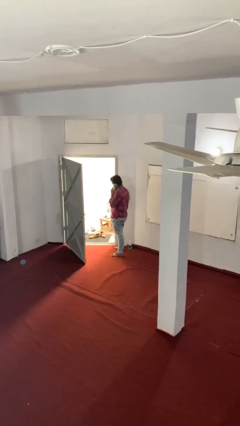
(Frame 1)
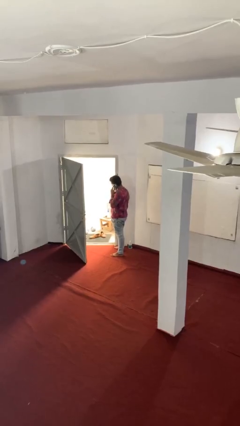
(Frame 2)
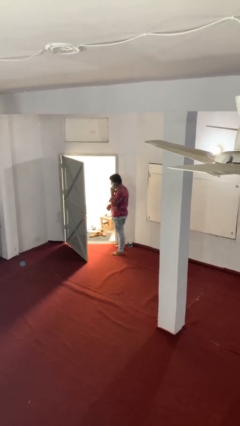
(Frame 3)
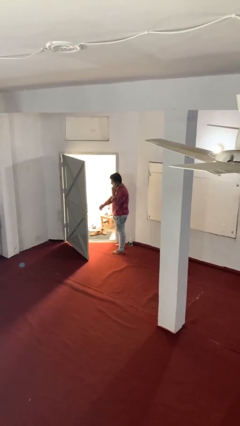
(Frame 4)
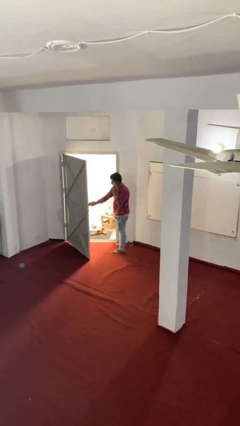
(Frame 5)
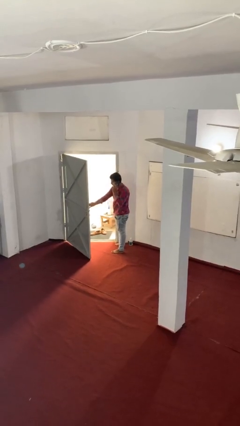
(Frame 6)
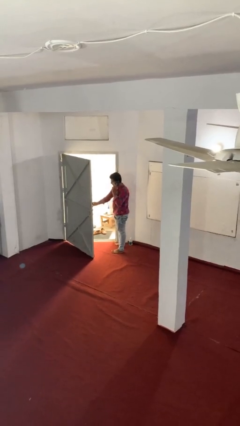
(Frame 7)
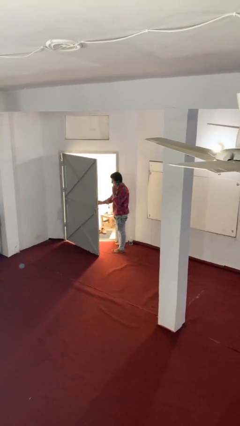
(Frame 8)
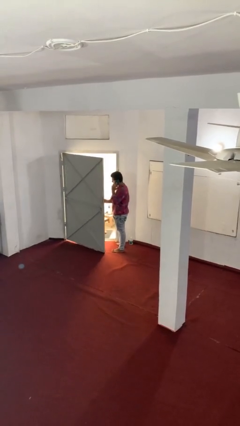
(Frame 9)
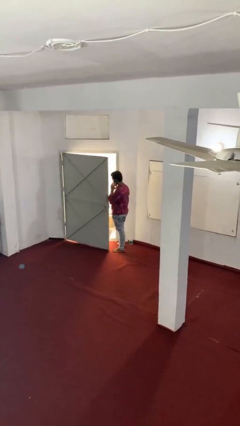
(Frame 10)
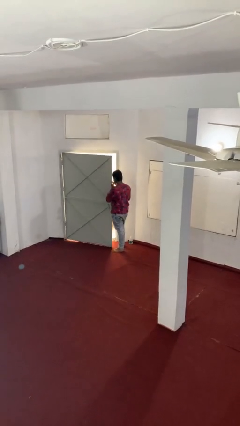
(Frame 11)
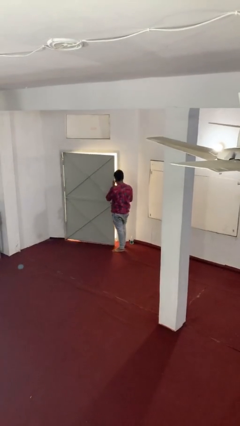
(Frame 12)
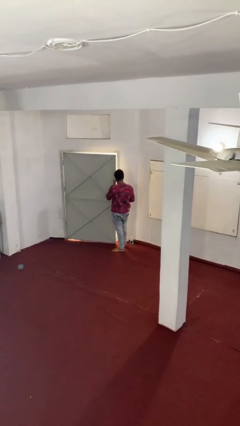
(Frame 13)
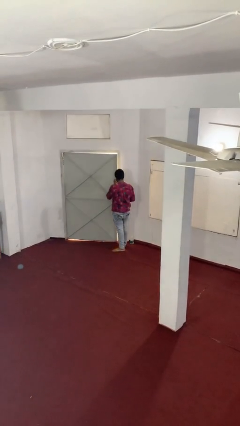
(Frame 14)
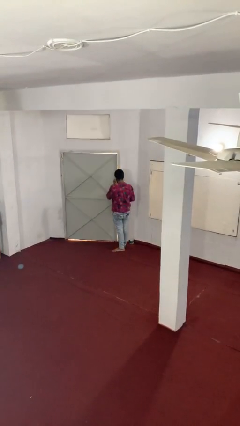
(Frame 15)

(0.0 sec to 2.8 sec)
person closes facility door

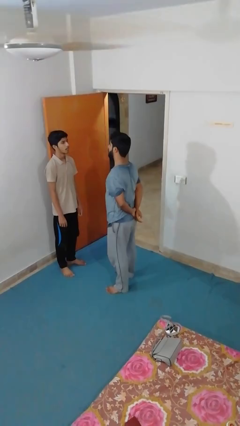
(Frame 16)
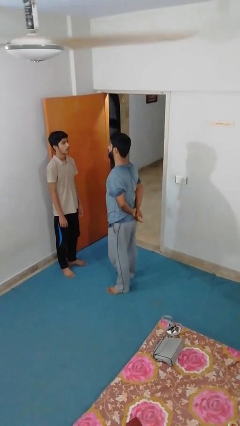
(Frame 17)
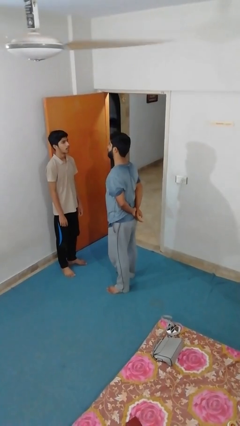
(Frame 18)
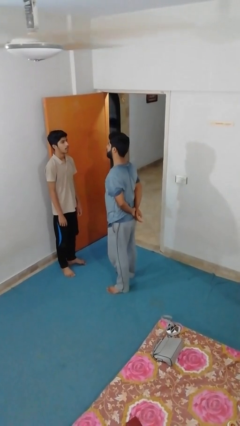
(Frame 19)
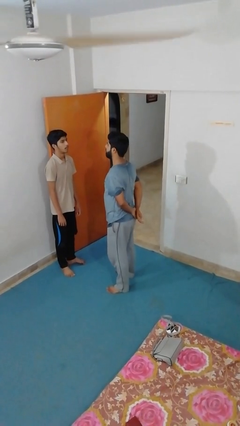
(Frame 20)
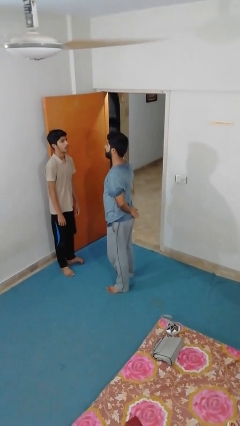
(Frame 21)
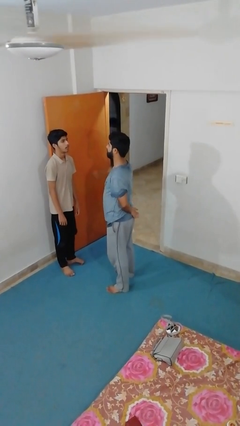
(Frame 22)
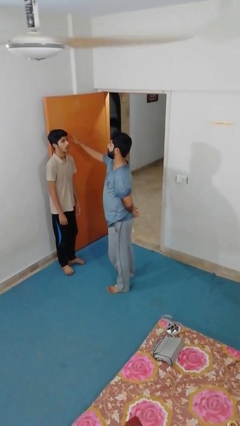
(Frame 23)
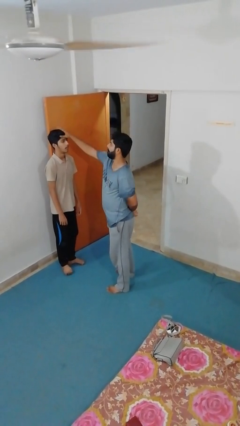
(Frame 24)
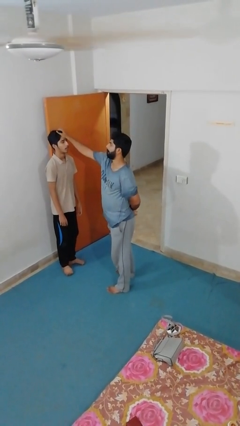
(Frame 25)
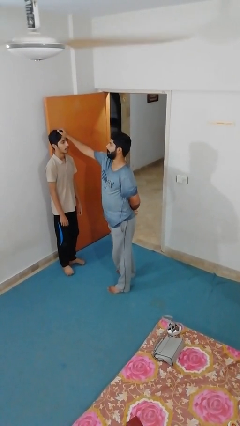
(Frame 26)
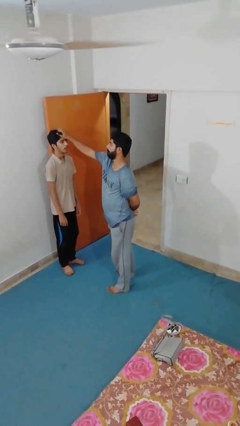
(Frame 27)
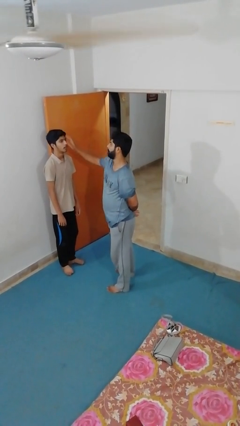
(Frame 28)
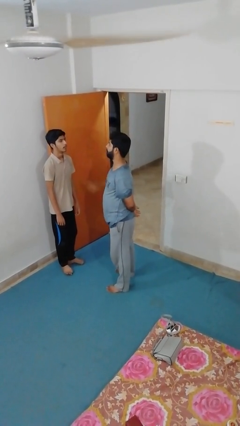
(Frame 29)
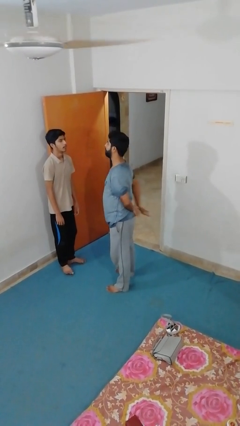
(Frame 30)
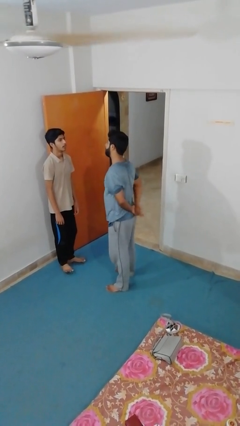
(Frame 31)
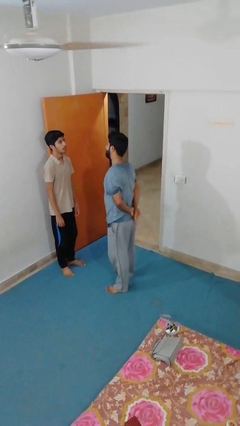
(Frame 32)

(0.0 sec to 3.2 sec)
person grabs person by hair

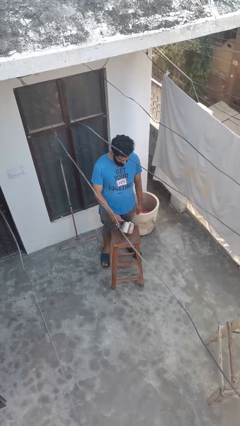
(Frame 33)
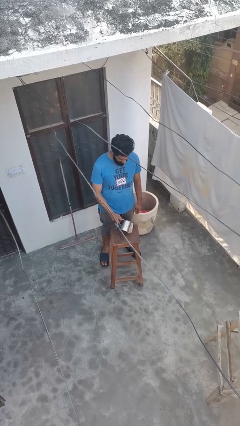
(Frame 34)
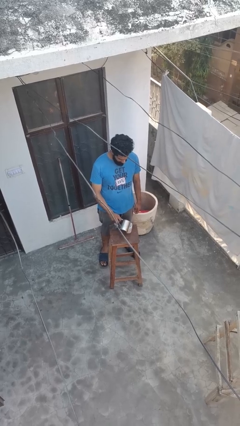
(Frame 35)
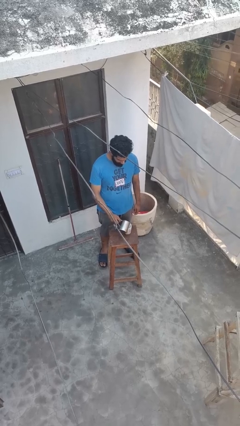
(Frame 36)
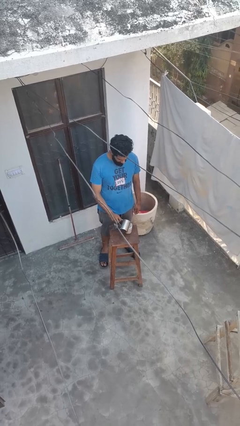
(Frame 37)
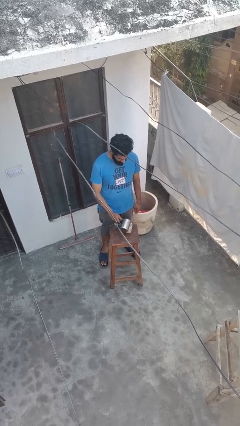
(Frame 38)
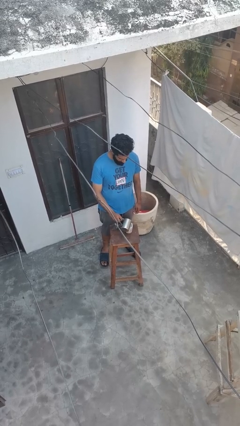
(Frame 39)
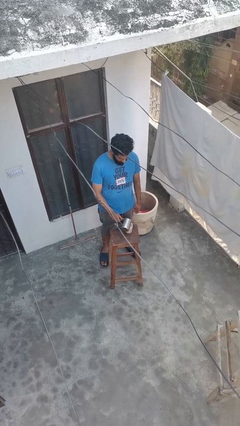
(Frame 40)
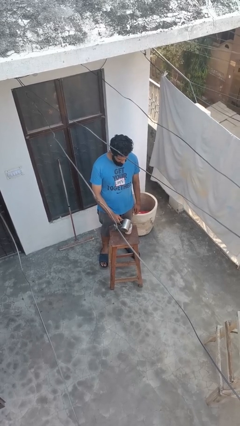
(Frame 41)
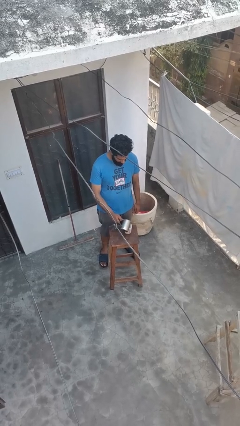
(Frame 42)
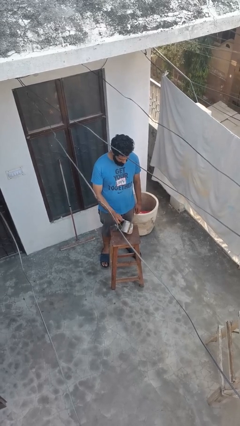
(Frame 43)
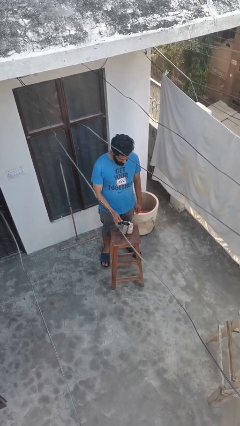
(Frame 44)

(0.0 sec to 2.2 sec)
person pours coffee into mug

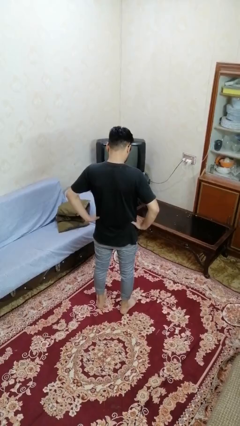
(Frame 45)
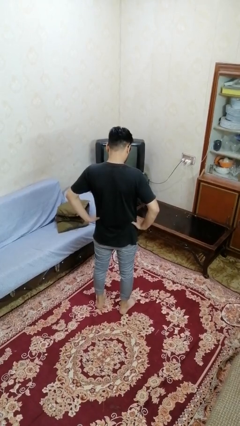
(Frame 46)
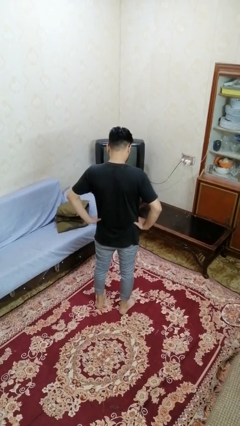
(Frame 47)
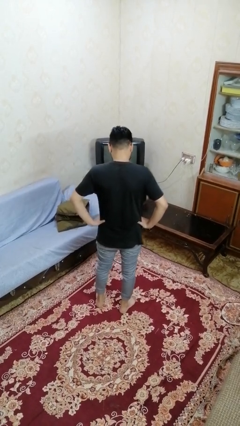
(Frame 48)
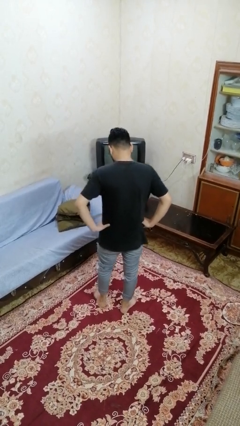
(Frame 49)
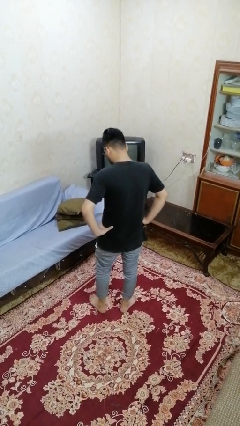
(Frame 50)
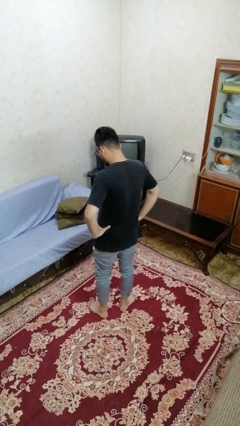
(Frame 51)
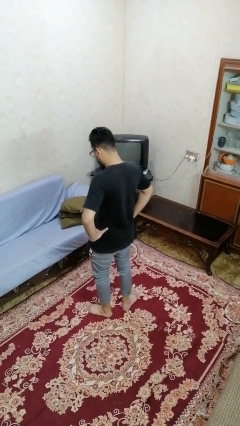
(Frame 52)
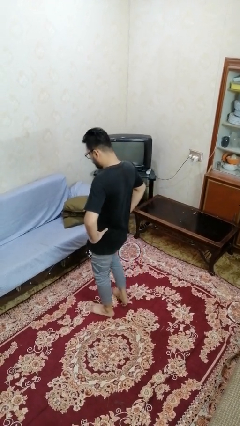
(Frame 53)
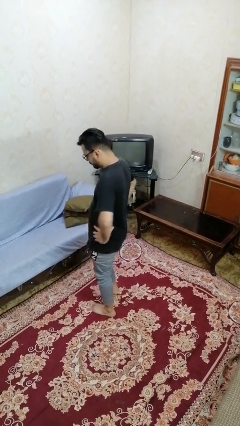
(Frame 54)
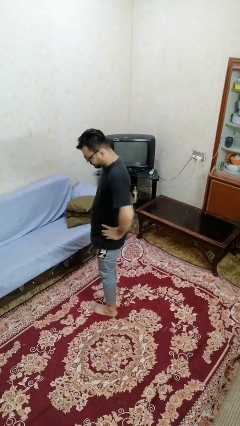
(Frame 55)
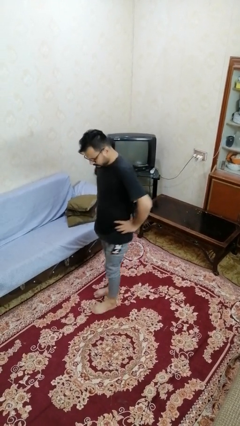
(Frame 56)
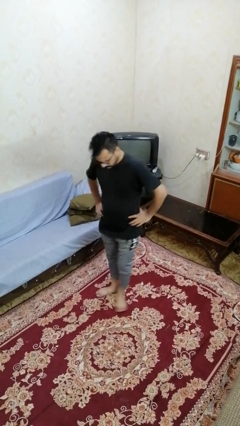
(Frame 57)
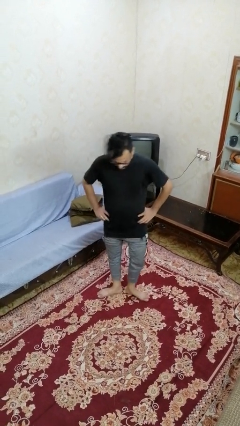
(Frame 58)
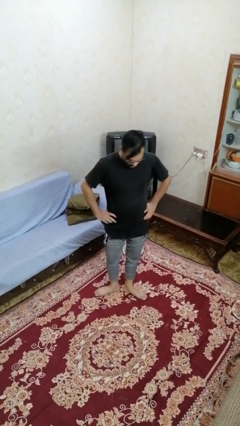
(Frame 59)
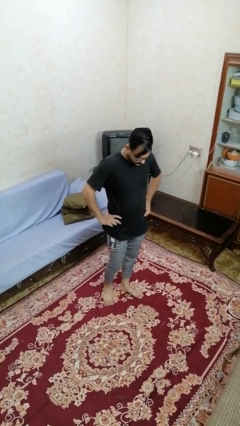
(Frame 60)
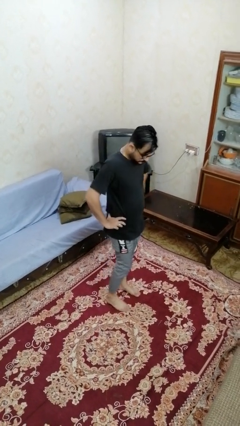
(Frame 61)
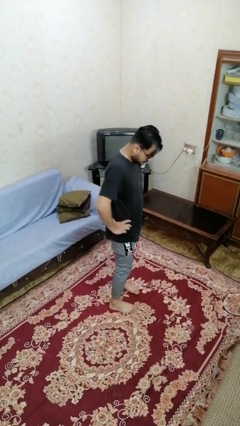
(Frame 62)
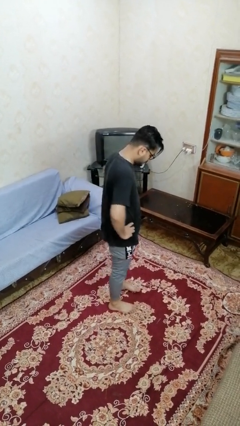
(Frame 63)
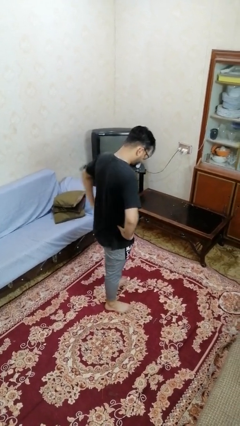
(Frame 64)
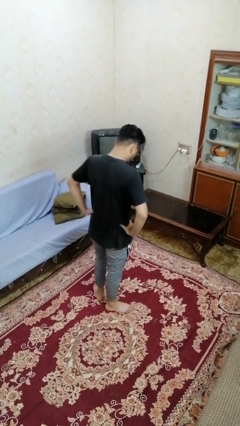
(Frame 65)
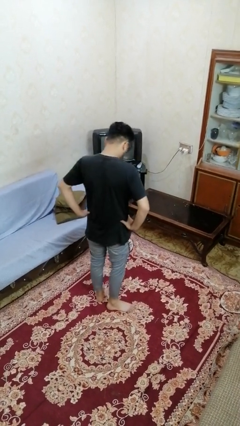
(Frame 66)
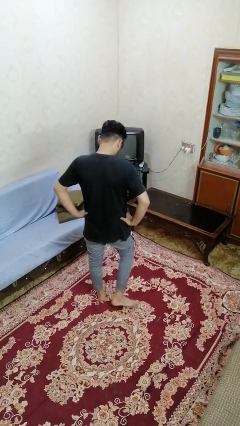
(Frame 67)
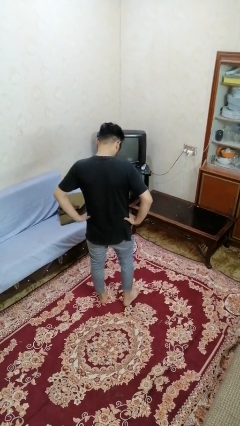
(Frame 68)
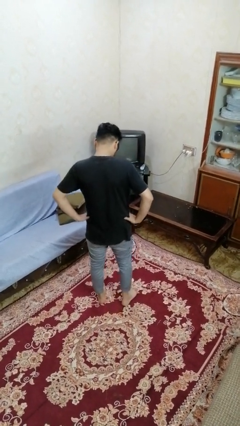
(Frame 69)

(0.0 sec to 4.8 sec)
person twirls

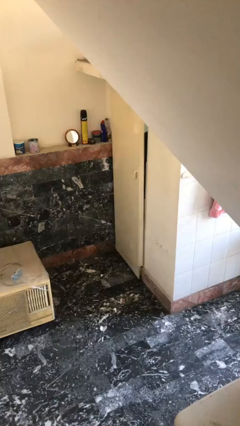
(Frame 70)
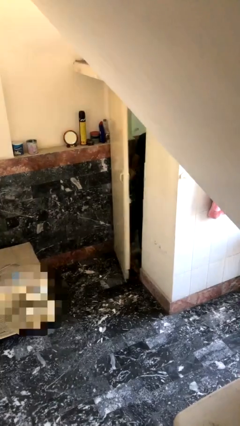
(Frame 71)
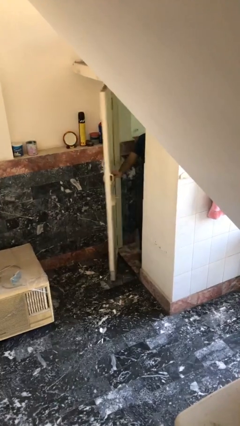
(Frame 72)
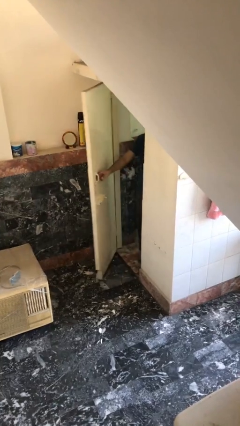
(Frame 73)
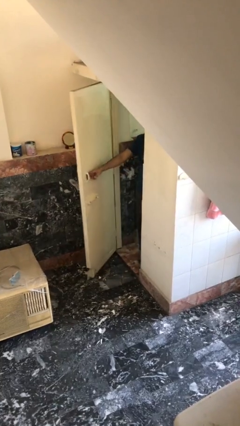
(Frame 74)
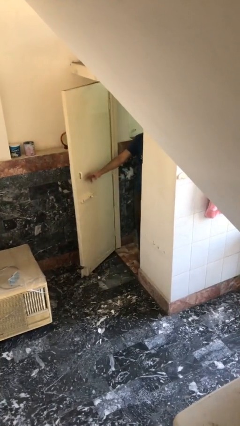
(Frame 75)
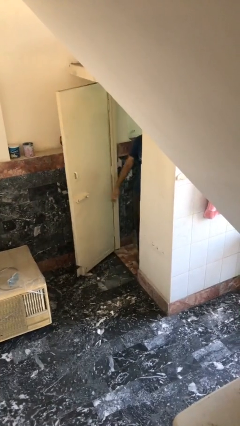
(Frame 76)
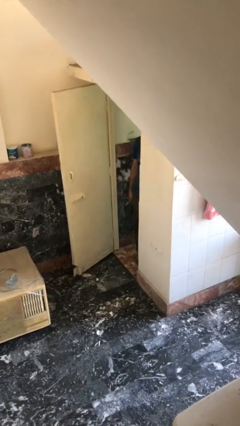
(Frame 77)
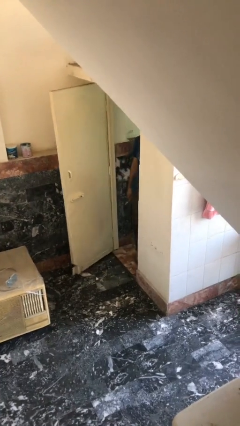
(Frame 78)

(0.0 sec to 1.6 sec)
person opens facility door

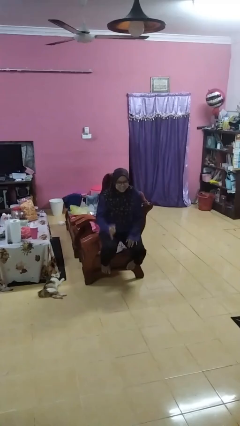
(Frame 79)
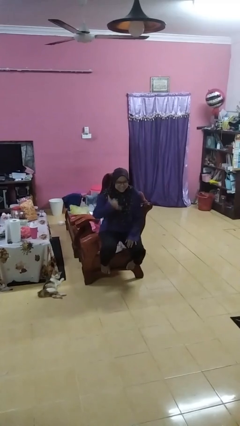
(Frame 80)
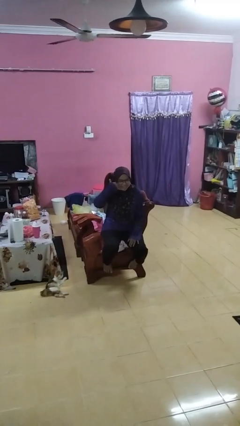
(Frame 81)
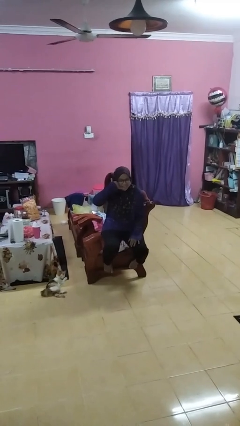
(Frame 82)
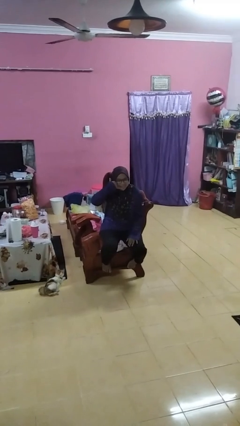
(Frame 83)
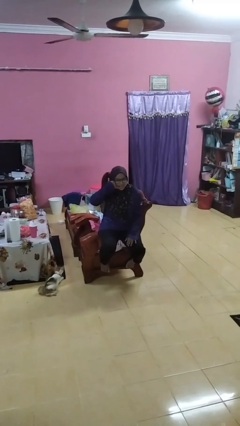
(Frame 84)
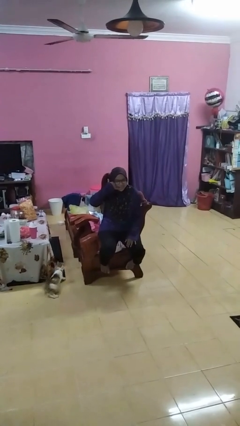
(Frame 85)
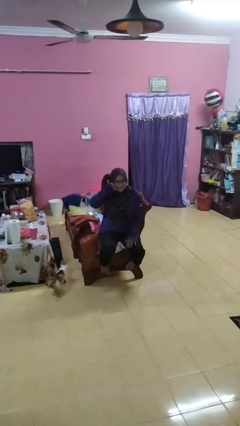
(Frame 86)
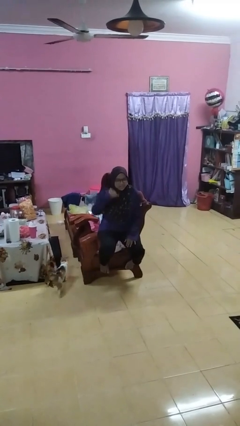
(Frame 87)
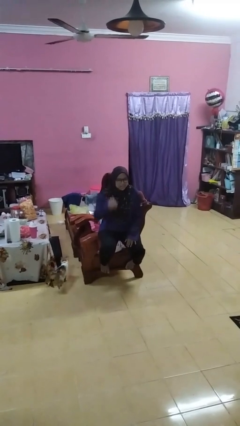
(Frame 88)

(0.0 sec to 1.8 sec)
person gestures call me

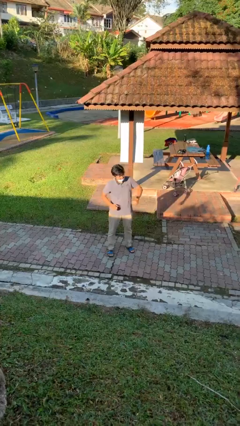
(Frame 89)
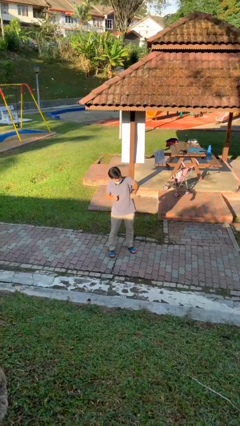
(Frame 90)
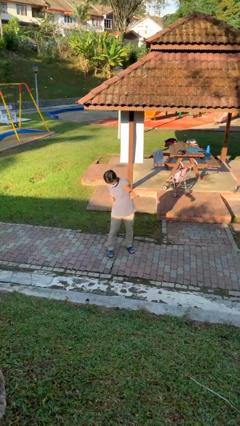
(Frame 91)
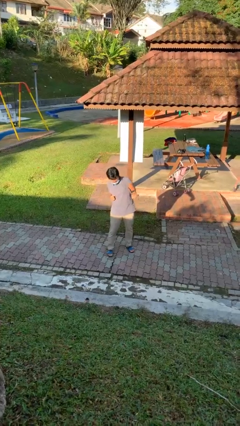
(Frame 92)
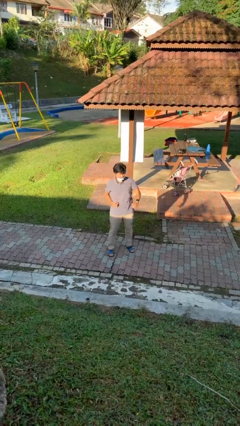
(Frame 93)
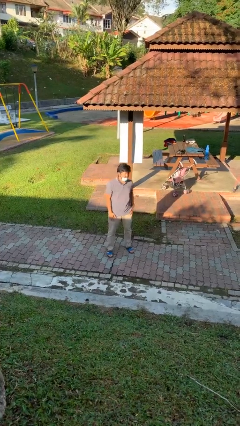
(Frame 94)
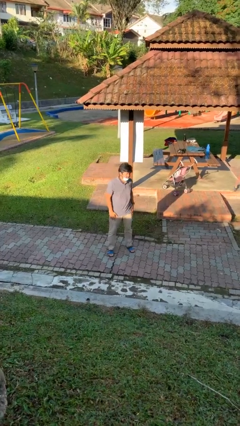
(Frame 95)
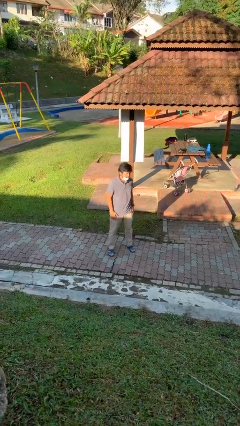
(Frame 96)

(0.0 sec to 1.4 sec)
person punches
